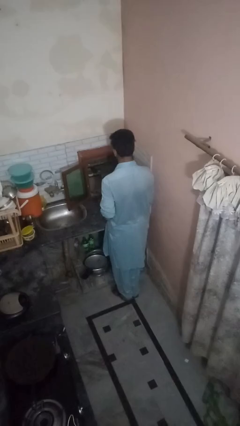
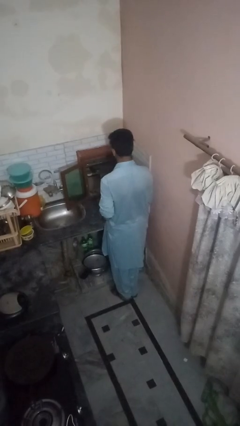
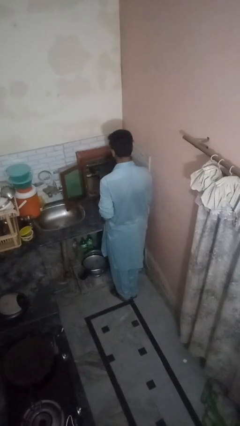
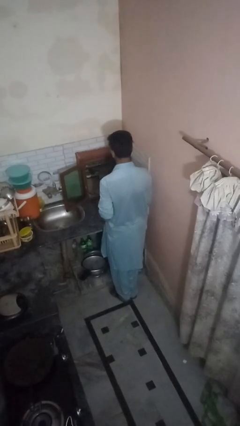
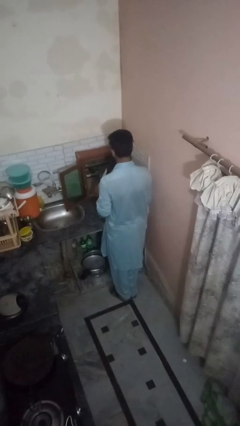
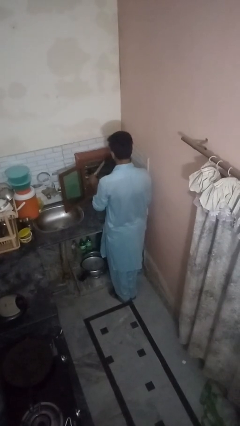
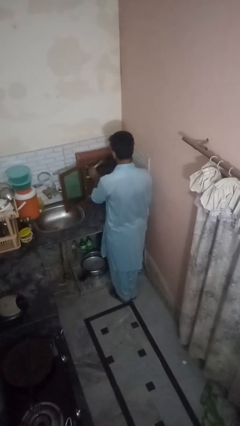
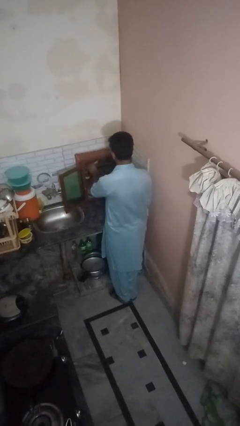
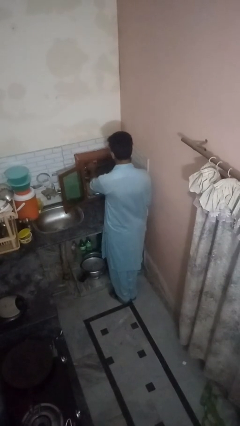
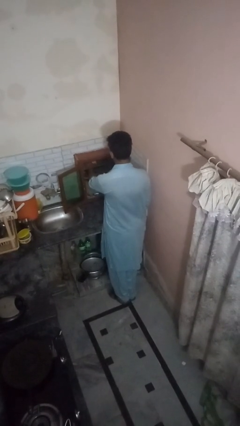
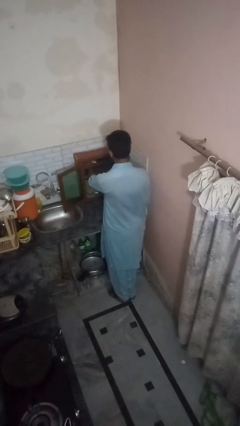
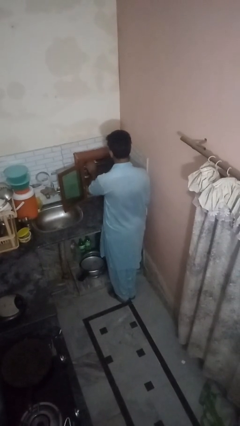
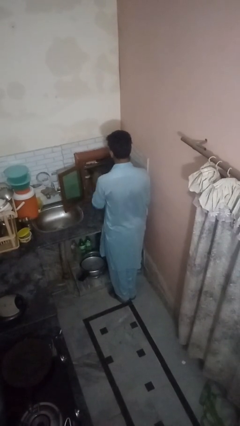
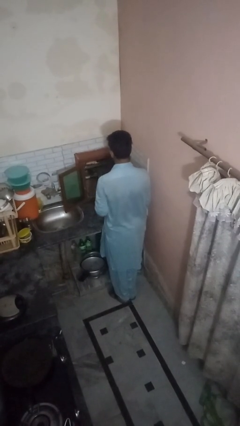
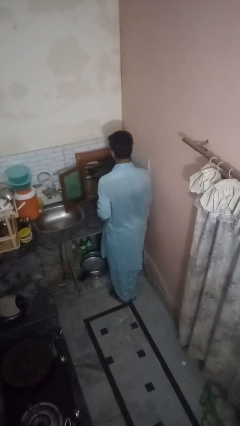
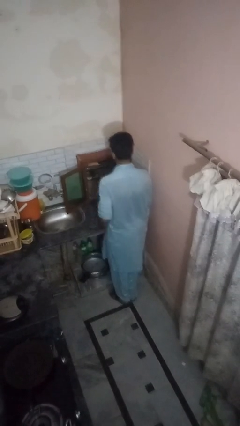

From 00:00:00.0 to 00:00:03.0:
person puts object into kitchen drawer

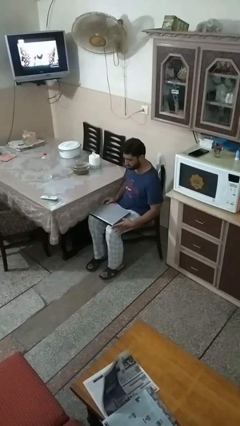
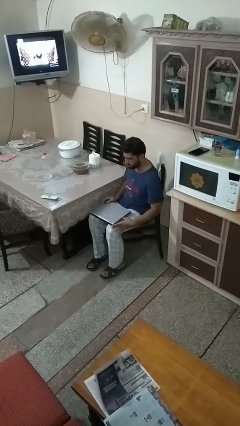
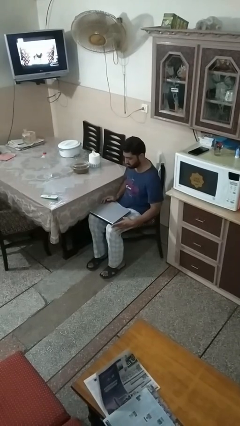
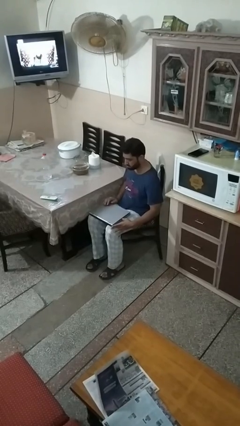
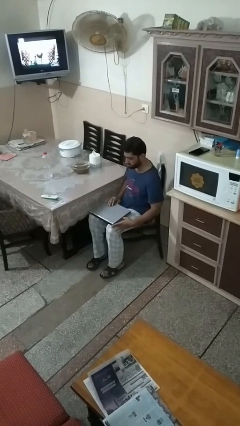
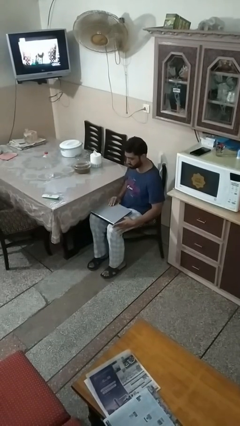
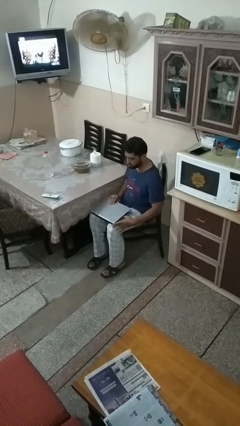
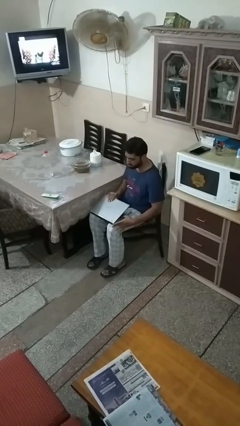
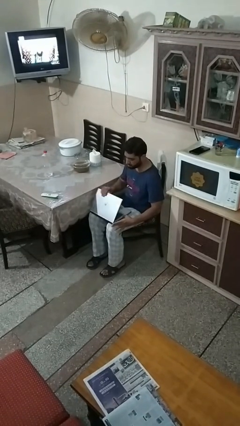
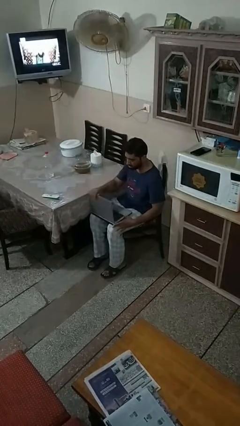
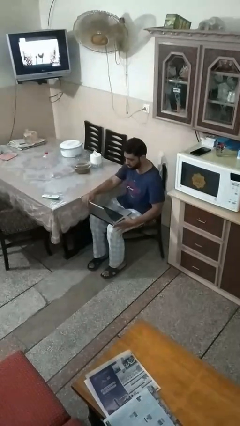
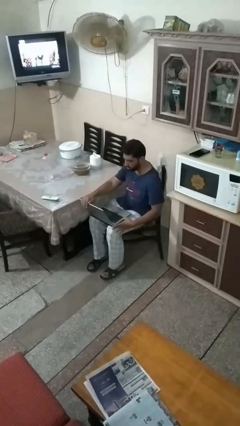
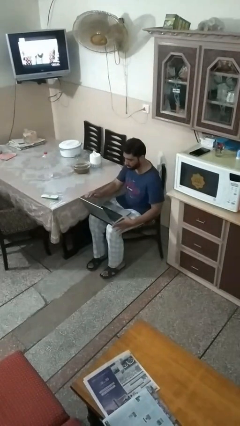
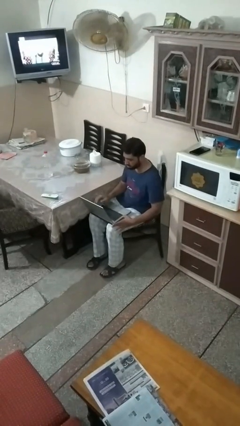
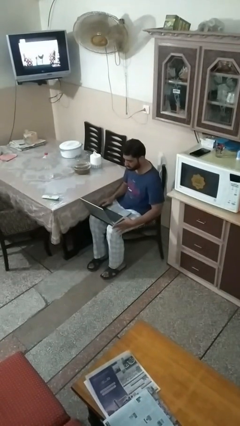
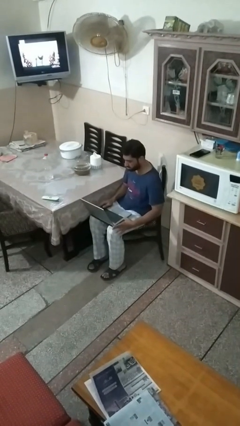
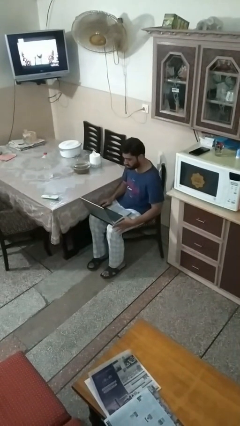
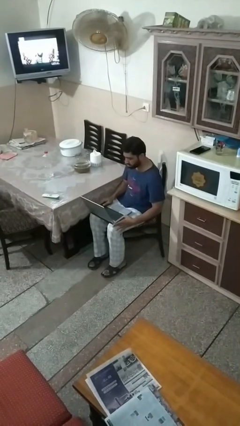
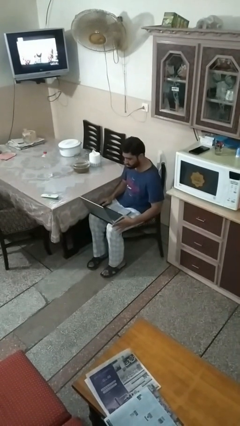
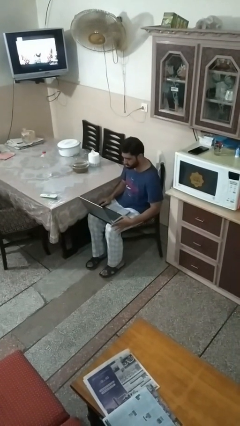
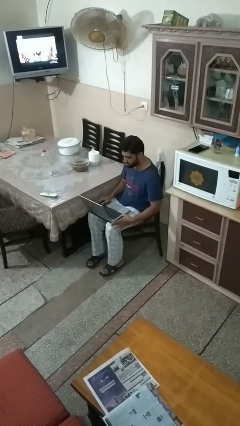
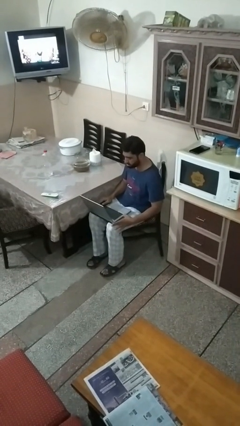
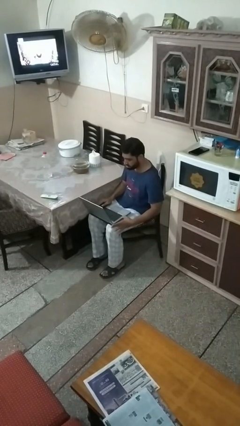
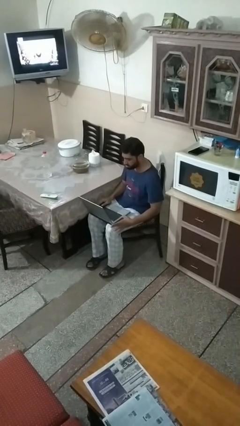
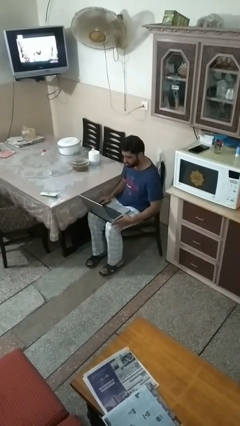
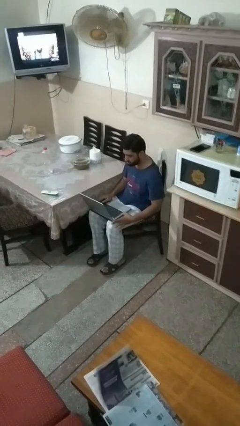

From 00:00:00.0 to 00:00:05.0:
person opens laptop

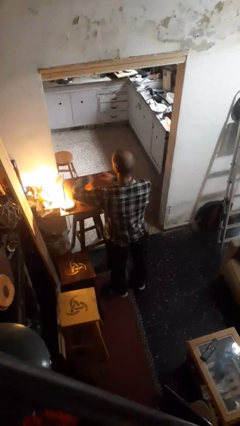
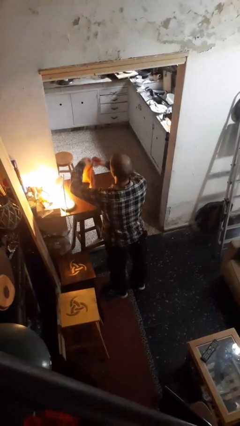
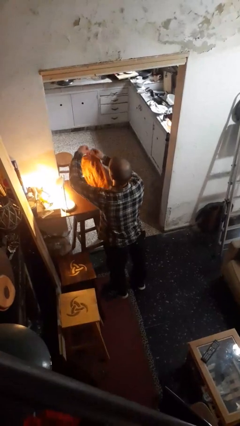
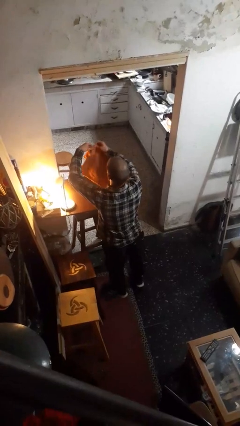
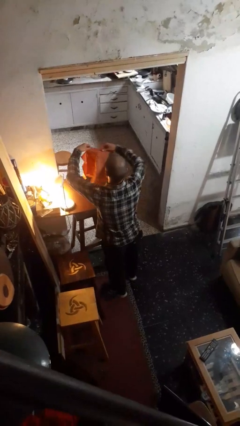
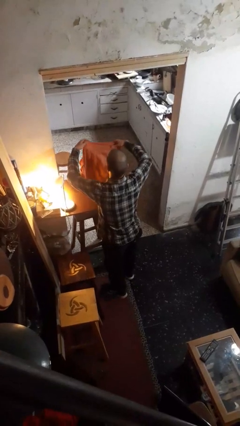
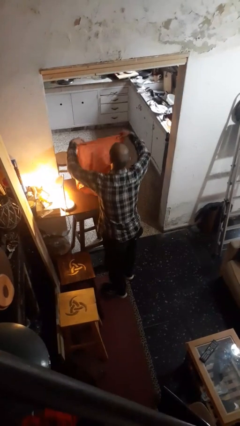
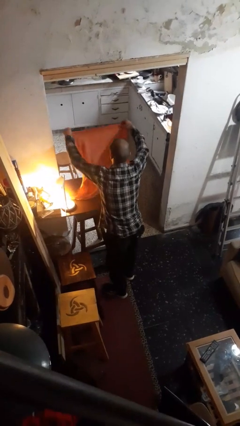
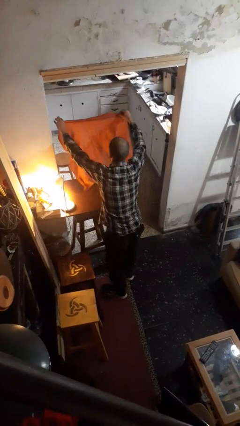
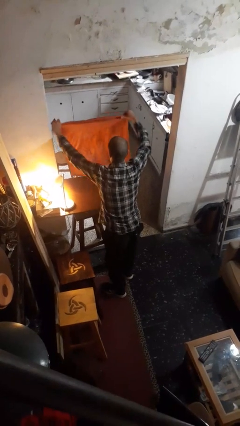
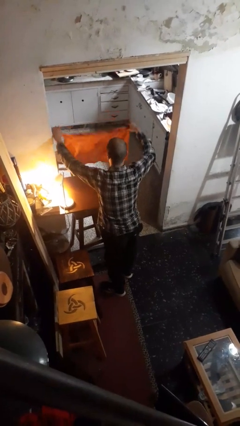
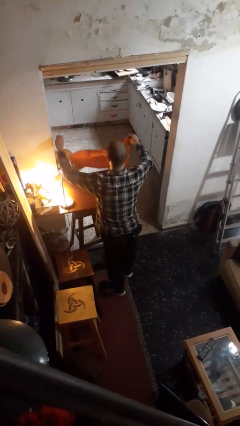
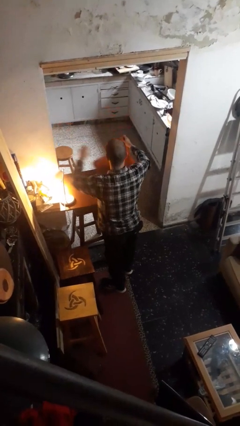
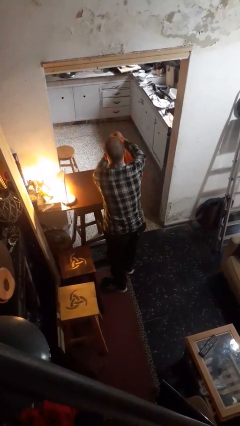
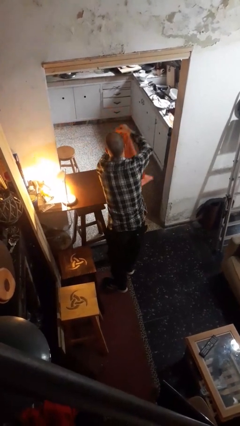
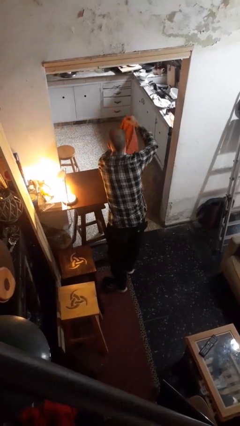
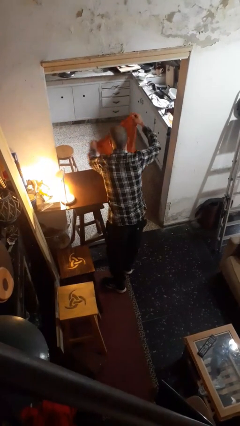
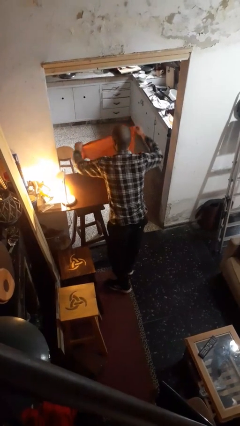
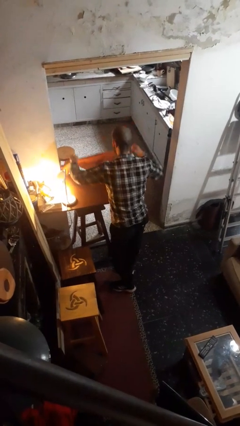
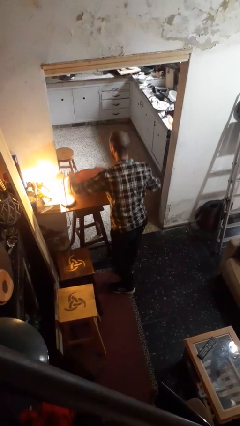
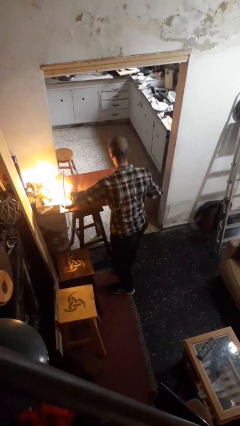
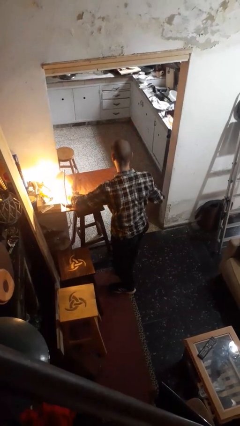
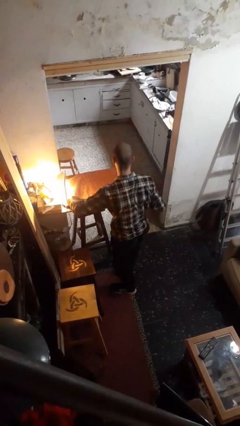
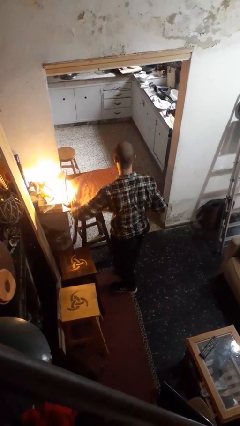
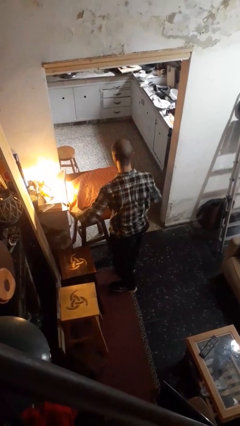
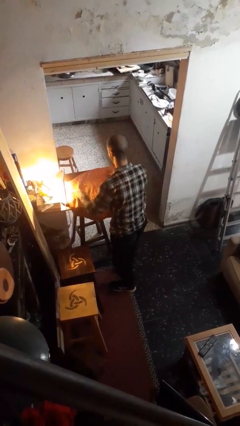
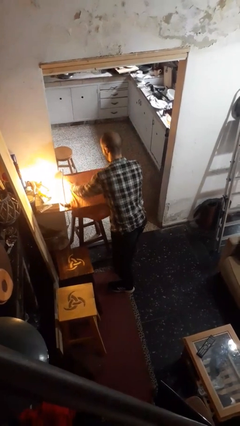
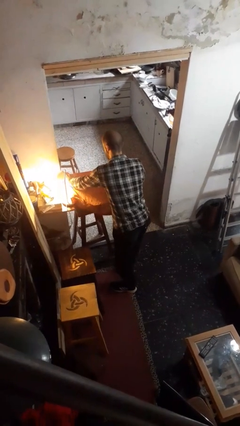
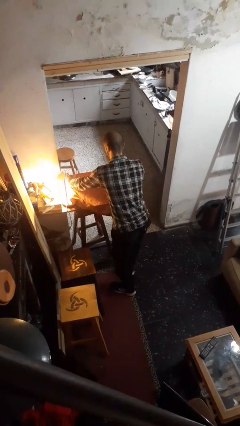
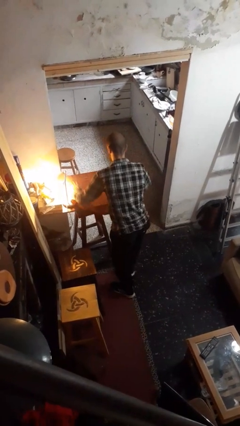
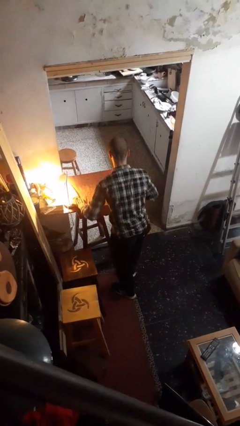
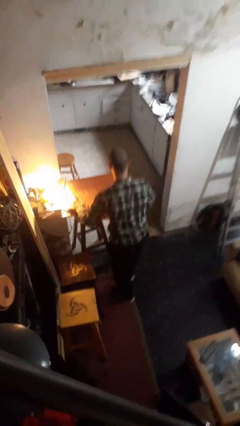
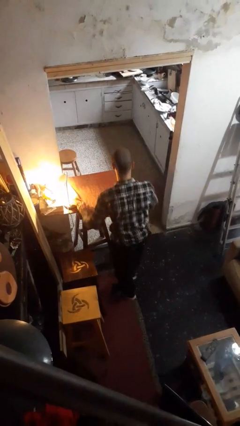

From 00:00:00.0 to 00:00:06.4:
person spreads tablecloth

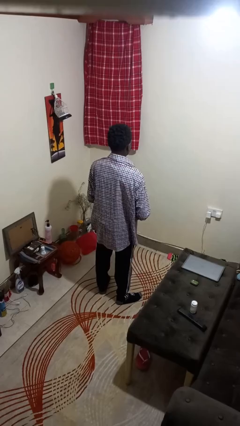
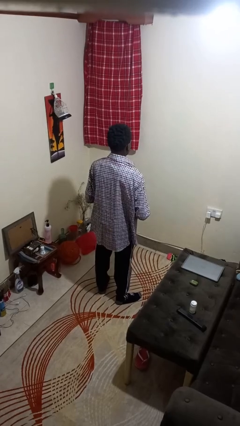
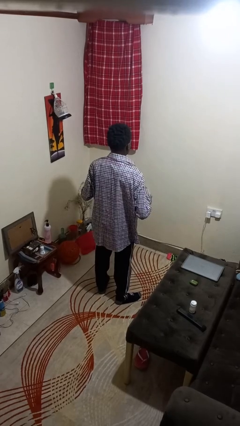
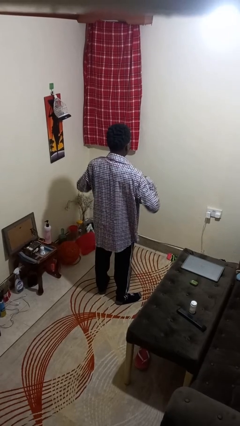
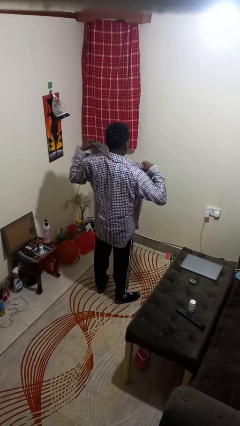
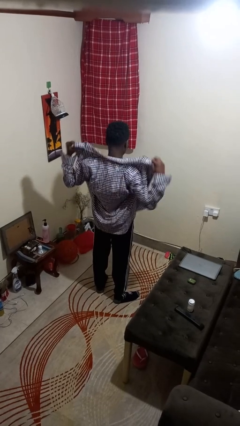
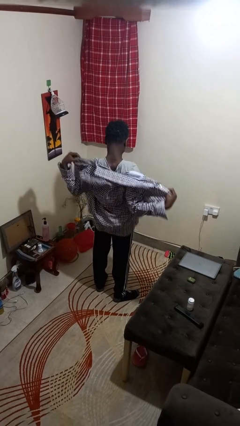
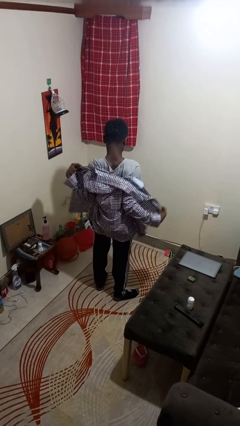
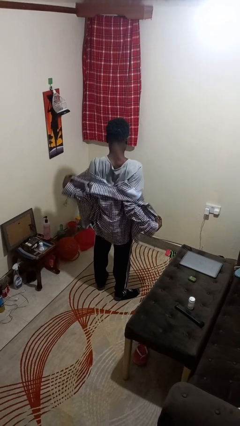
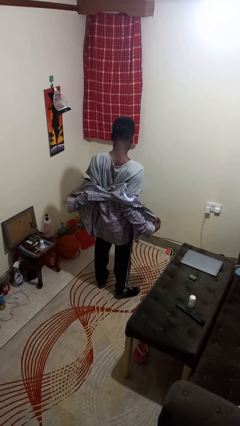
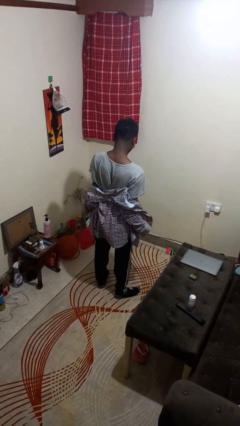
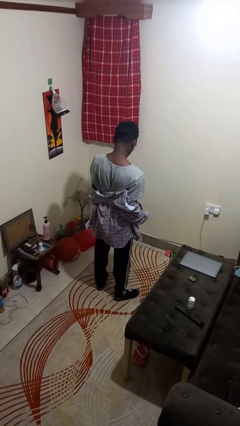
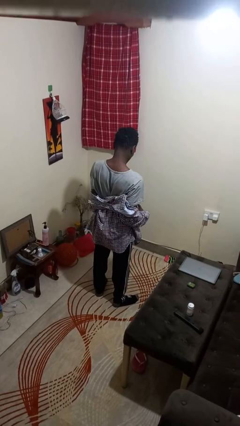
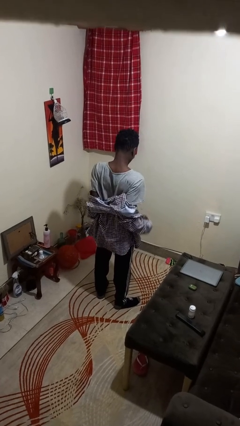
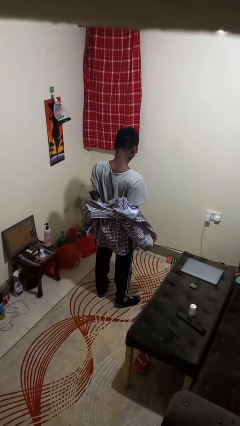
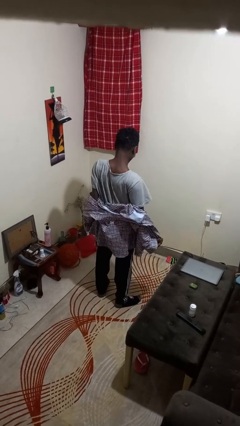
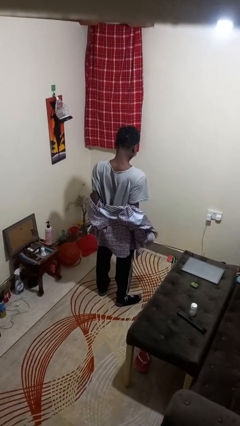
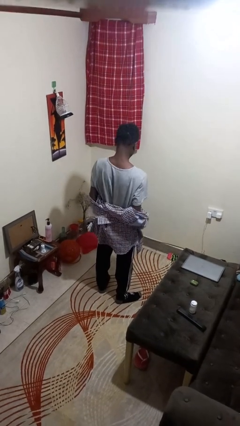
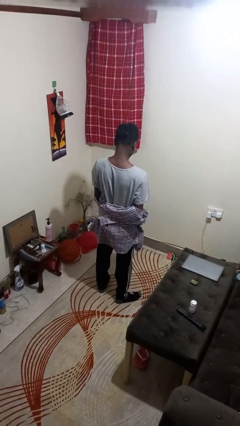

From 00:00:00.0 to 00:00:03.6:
person takes off shirt
